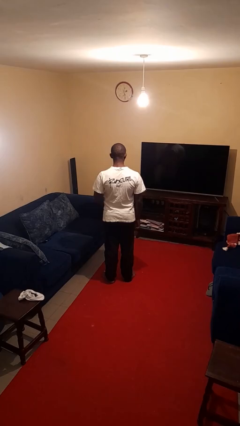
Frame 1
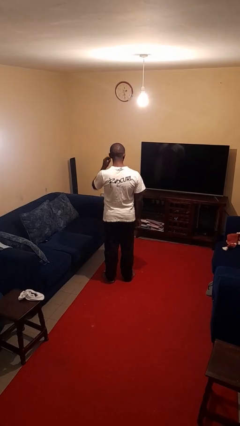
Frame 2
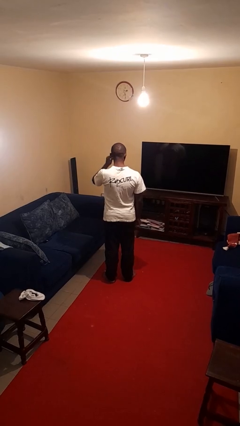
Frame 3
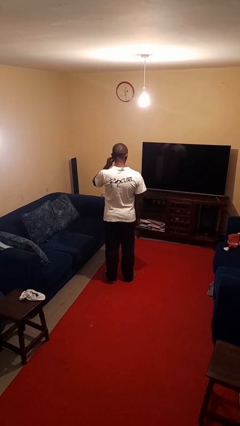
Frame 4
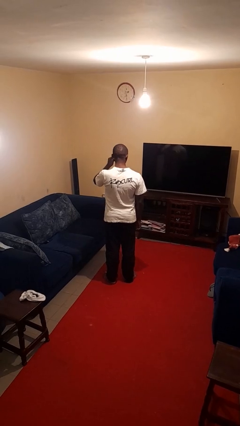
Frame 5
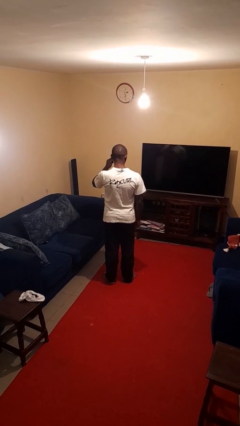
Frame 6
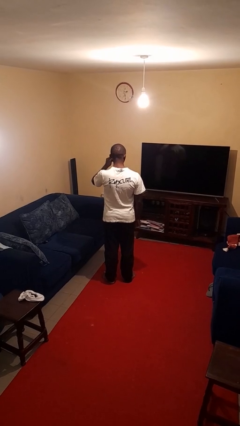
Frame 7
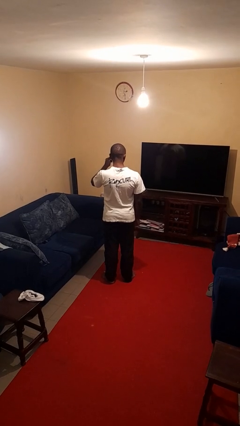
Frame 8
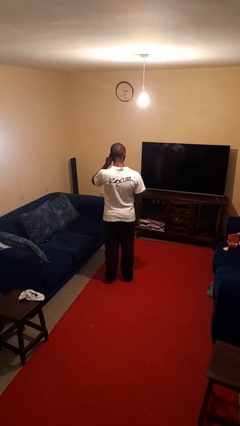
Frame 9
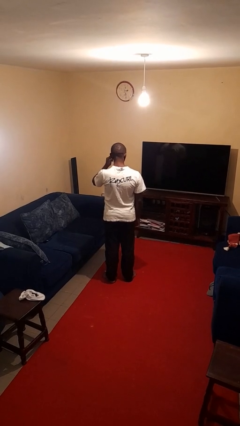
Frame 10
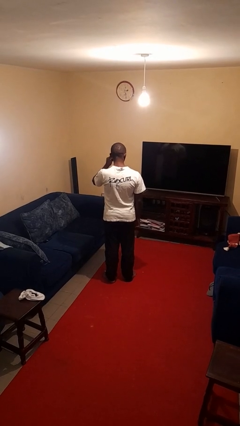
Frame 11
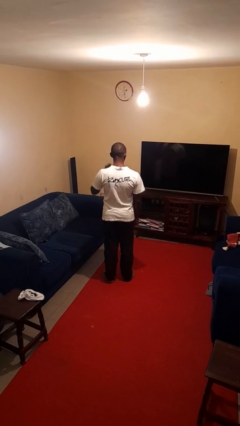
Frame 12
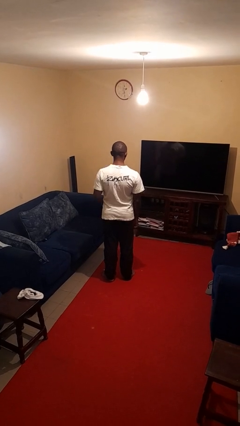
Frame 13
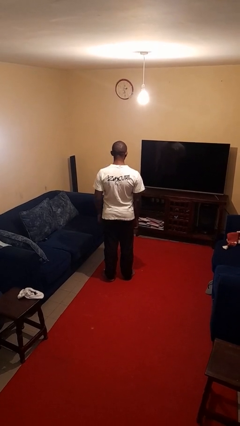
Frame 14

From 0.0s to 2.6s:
person touches earlobe

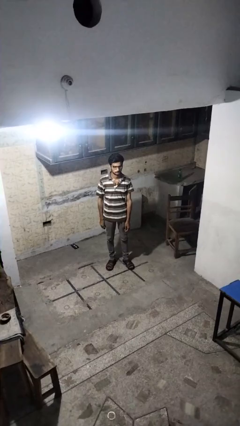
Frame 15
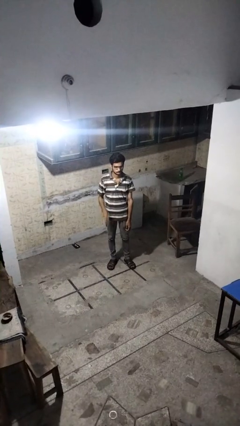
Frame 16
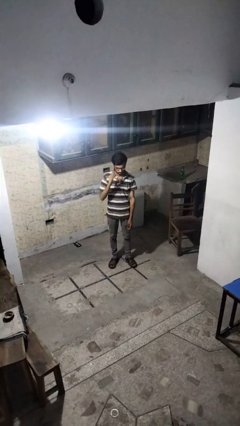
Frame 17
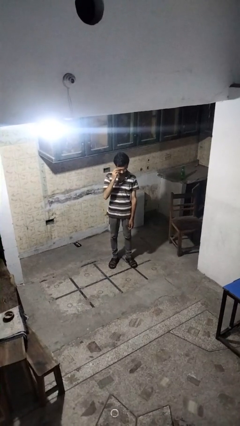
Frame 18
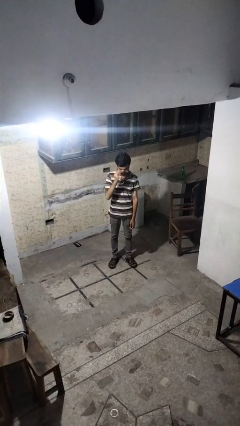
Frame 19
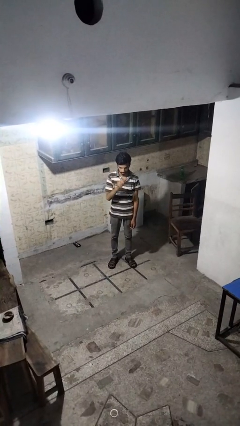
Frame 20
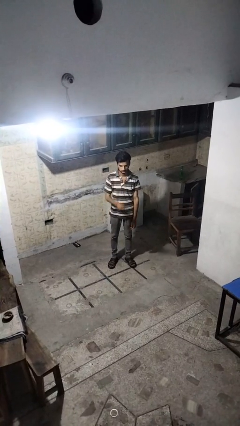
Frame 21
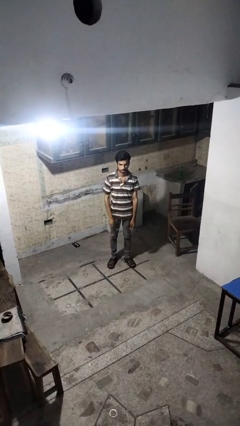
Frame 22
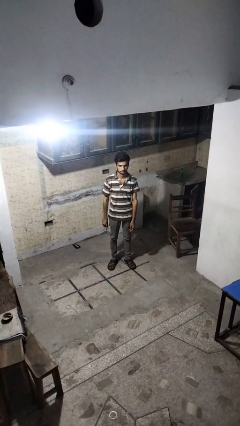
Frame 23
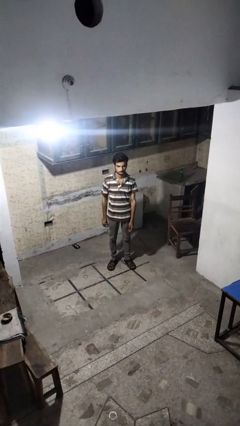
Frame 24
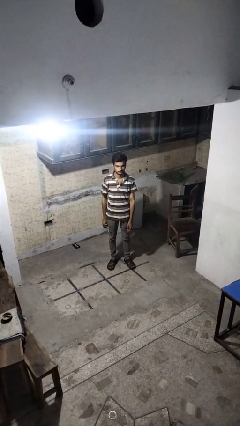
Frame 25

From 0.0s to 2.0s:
person takes off glasses

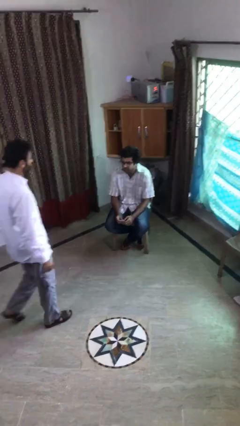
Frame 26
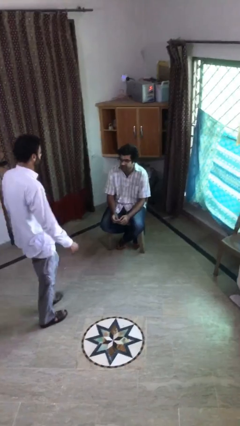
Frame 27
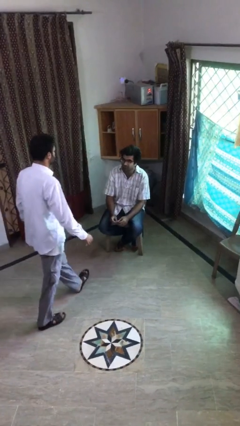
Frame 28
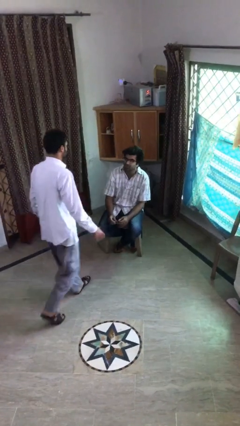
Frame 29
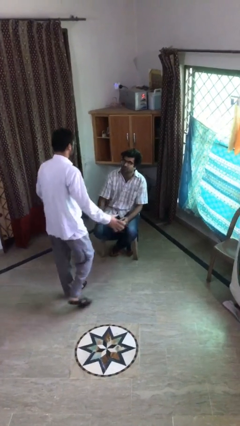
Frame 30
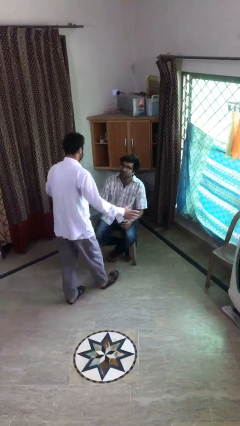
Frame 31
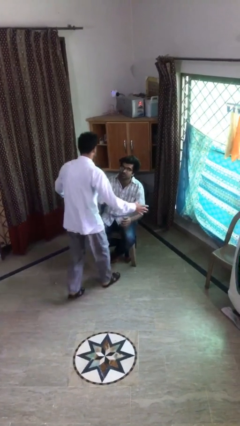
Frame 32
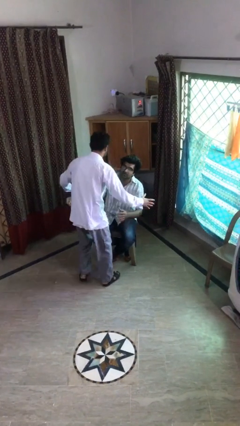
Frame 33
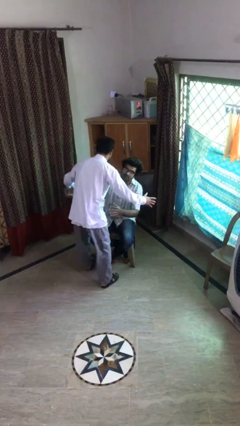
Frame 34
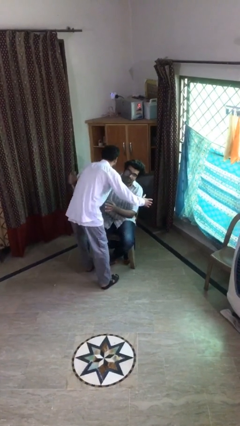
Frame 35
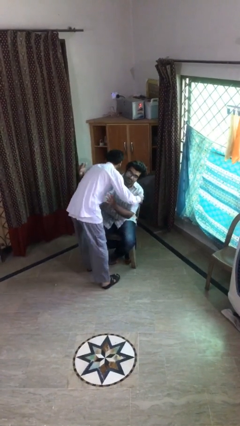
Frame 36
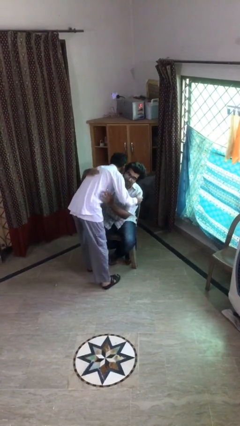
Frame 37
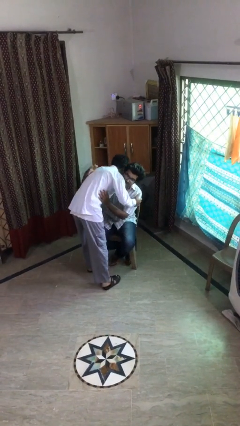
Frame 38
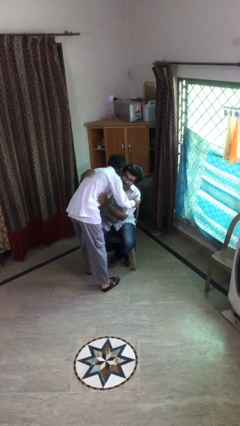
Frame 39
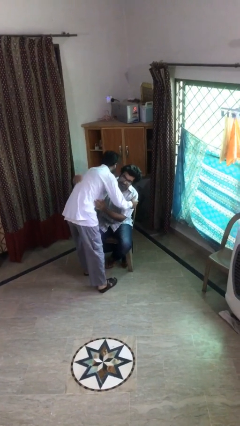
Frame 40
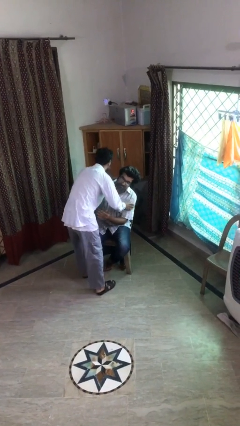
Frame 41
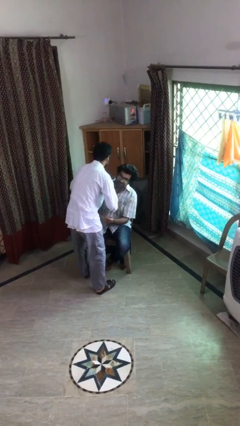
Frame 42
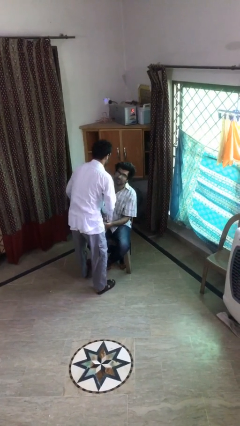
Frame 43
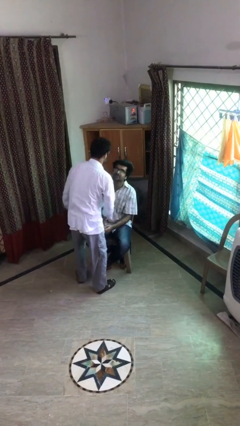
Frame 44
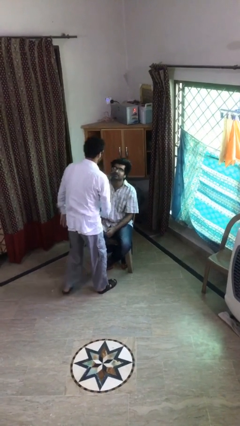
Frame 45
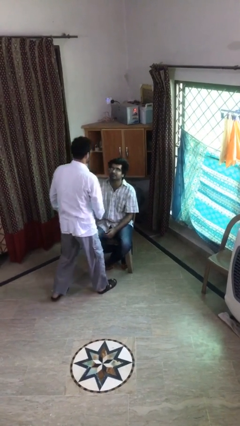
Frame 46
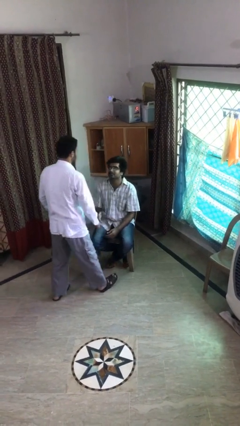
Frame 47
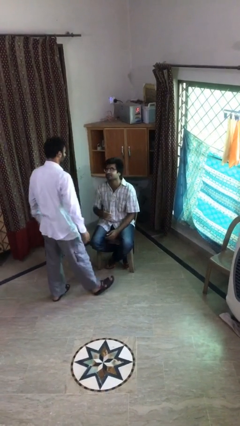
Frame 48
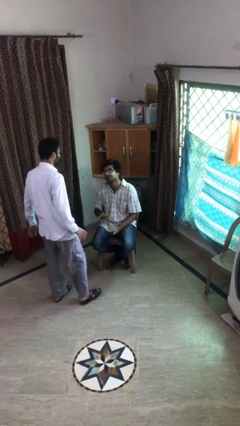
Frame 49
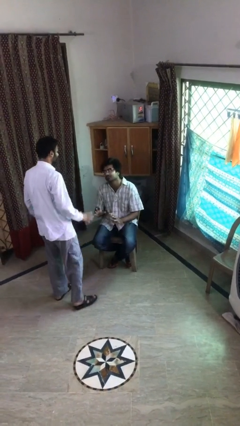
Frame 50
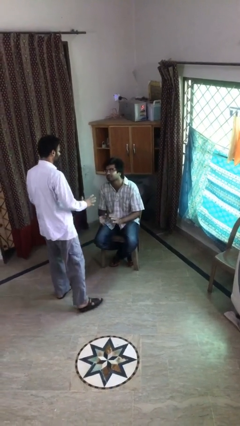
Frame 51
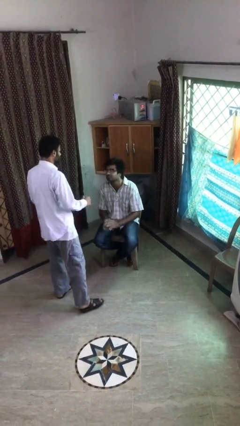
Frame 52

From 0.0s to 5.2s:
person embraces person

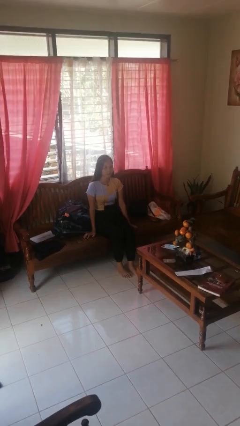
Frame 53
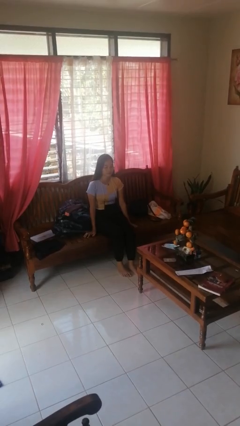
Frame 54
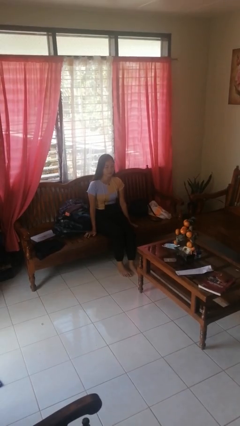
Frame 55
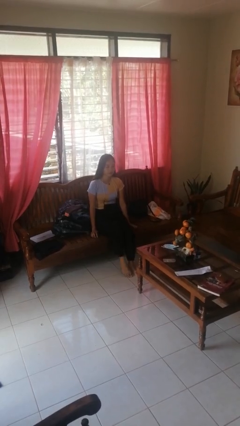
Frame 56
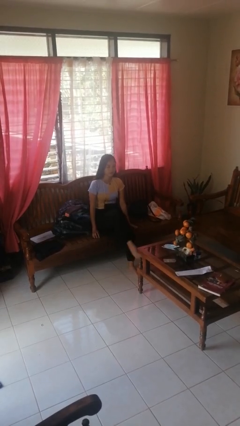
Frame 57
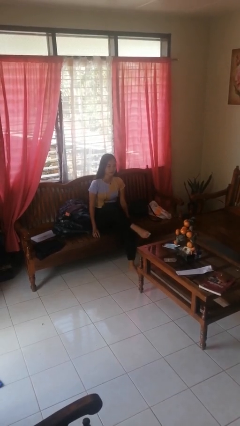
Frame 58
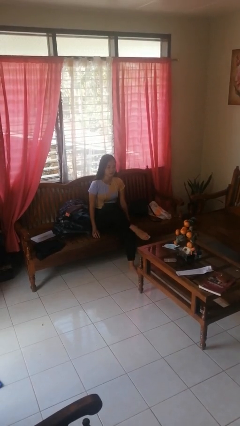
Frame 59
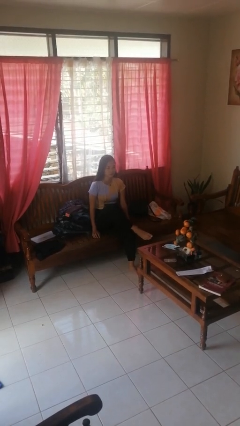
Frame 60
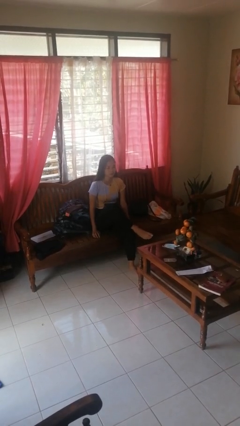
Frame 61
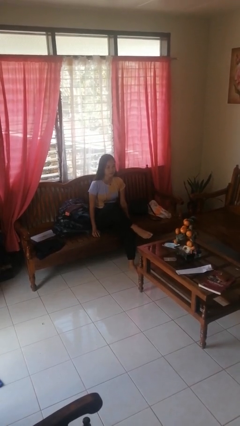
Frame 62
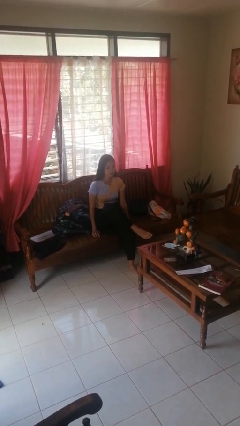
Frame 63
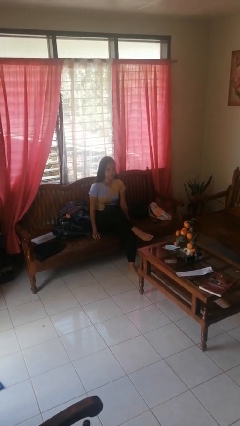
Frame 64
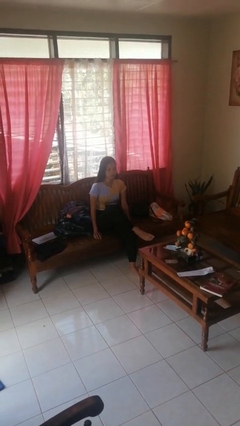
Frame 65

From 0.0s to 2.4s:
person crosses legs

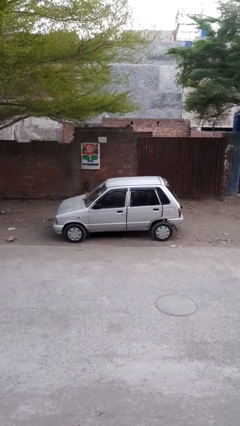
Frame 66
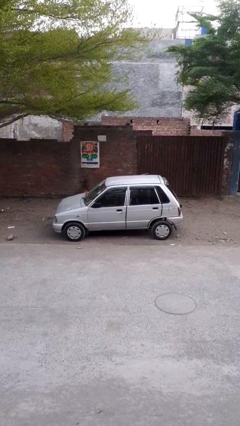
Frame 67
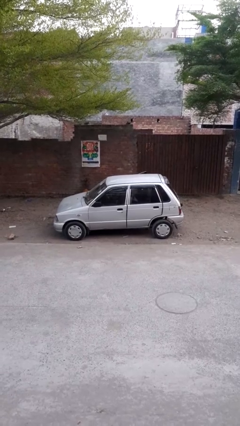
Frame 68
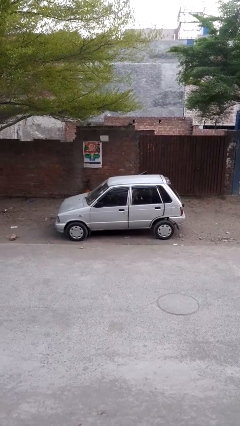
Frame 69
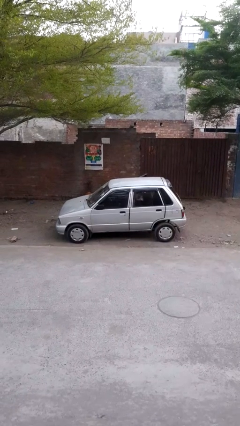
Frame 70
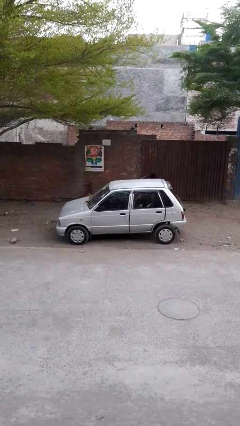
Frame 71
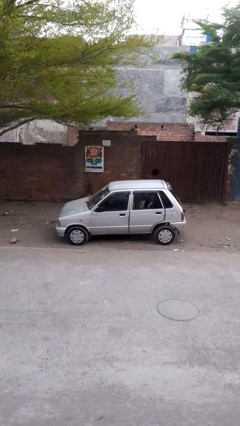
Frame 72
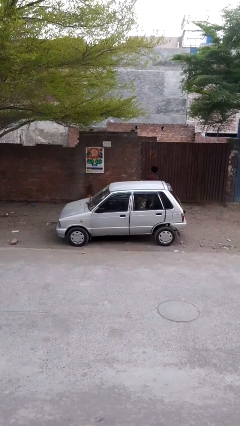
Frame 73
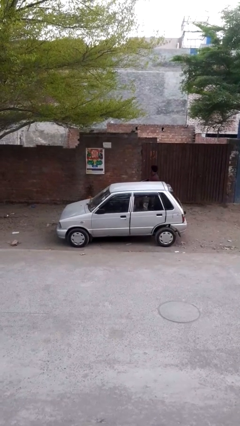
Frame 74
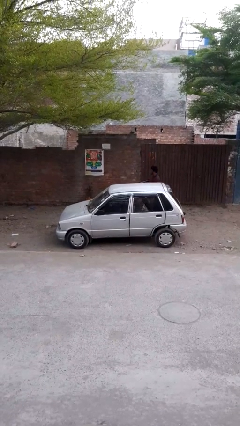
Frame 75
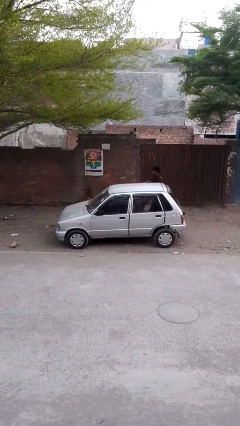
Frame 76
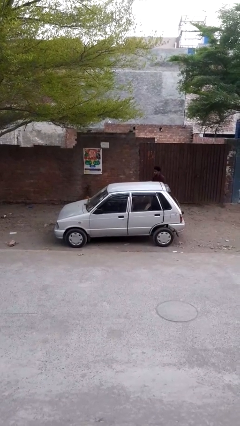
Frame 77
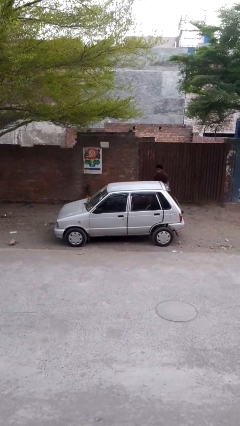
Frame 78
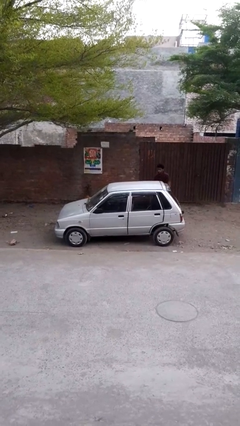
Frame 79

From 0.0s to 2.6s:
car drops off person

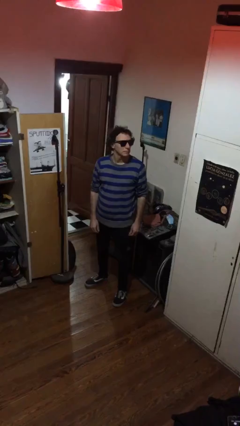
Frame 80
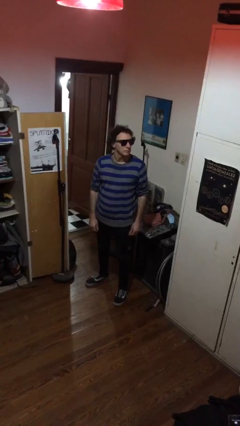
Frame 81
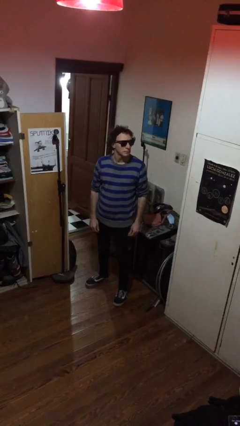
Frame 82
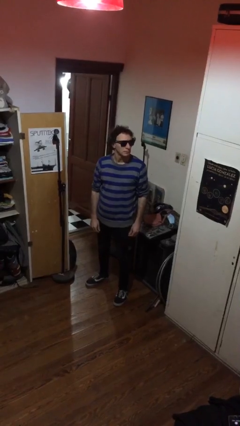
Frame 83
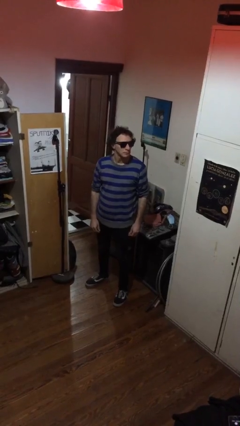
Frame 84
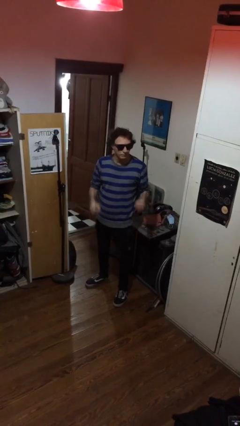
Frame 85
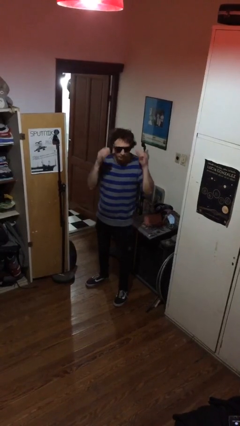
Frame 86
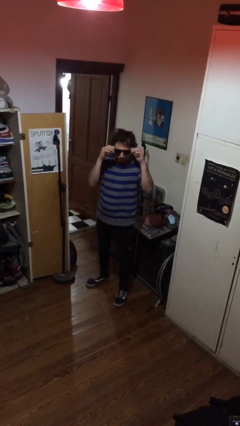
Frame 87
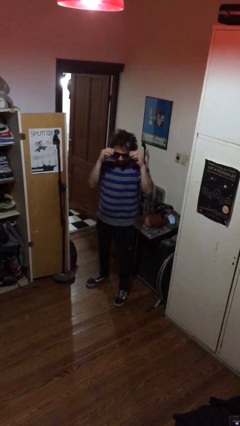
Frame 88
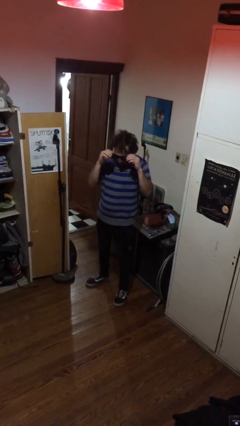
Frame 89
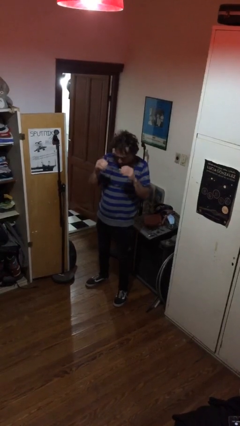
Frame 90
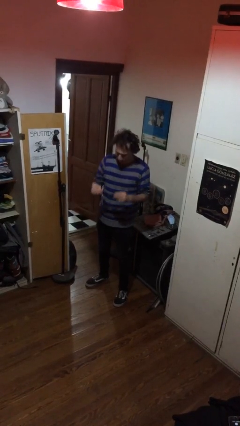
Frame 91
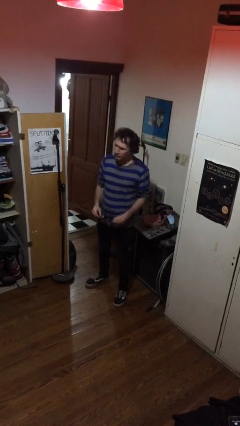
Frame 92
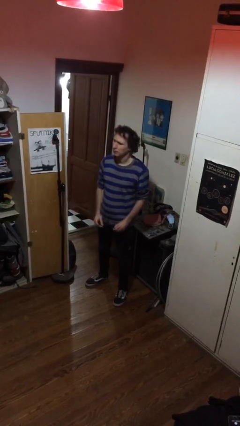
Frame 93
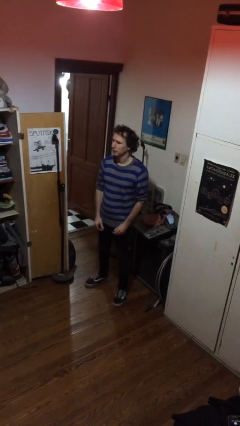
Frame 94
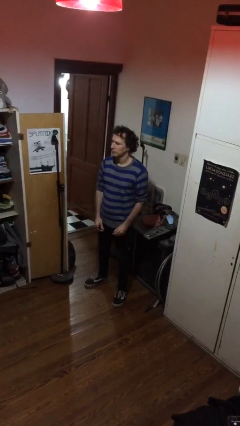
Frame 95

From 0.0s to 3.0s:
person takes off sunglasses
